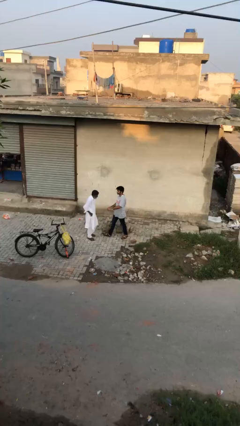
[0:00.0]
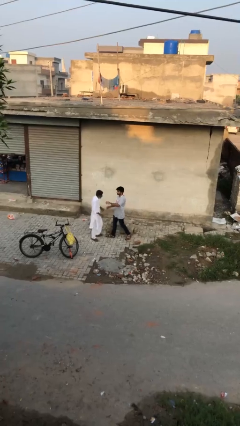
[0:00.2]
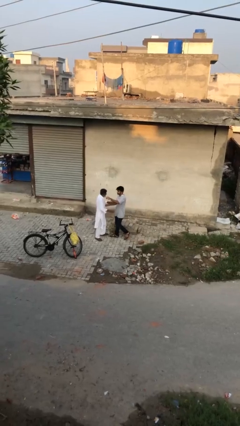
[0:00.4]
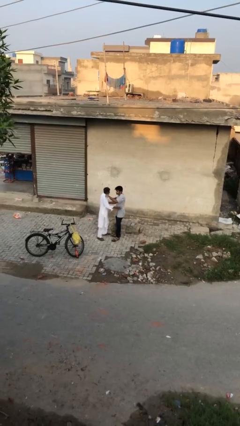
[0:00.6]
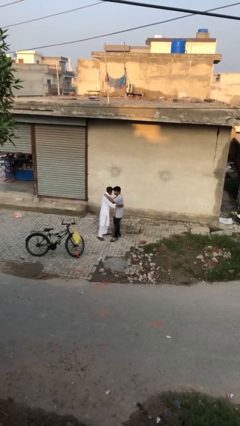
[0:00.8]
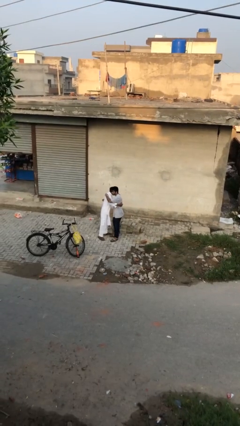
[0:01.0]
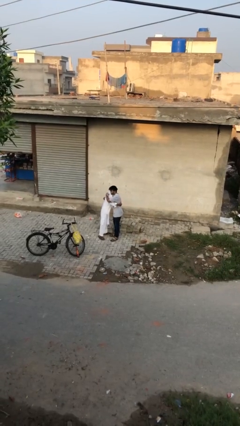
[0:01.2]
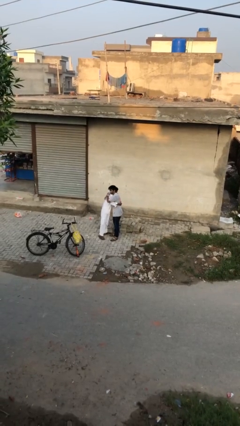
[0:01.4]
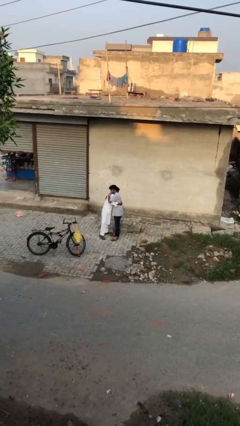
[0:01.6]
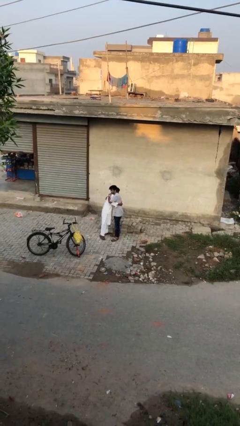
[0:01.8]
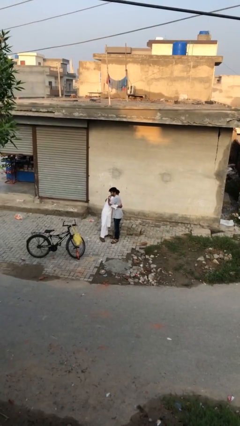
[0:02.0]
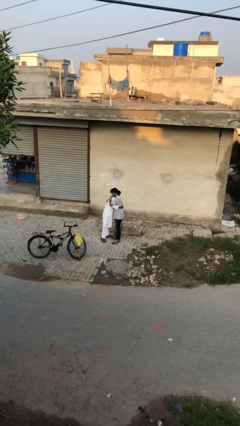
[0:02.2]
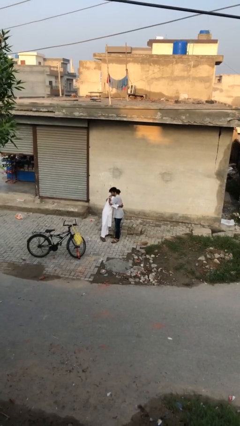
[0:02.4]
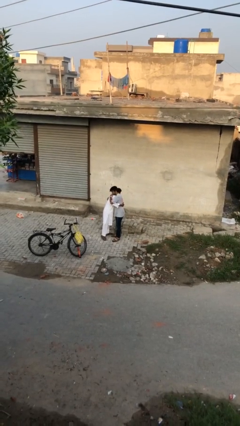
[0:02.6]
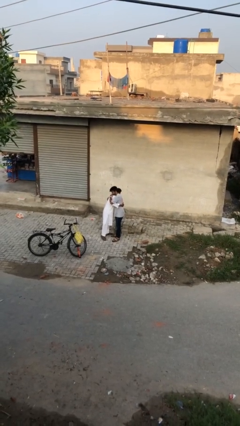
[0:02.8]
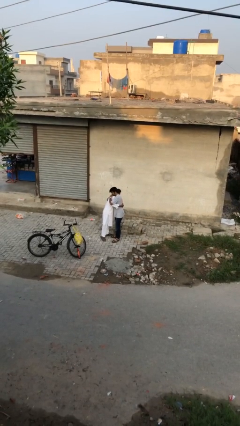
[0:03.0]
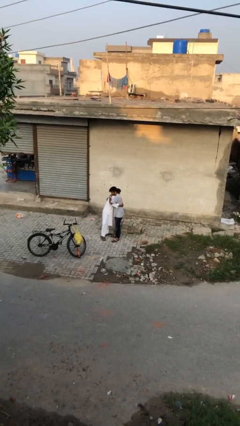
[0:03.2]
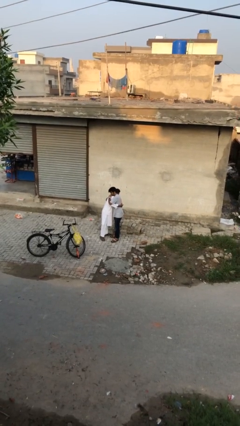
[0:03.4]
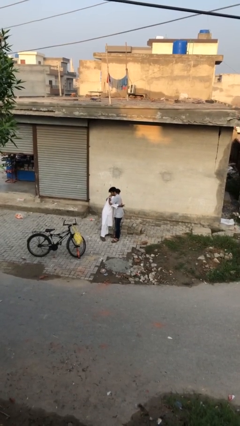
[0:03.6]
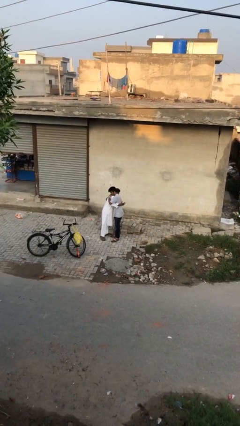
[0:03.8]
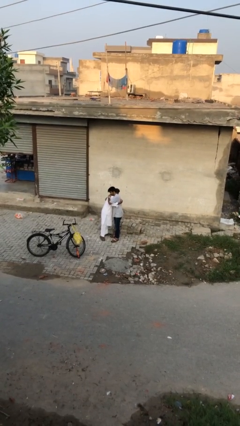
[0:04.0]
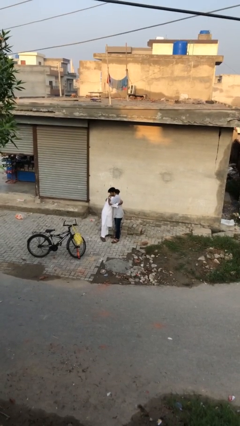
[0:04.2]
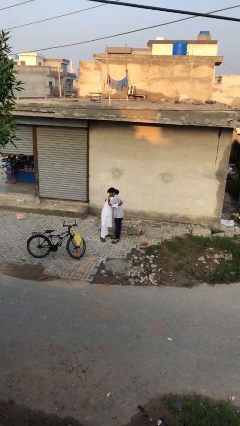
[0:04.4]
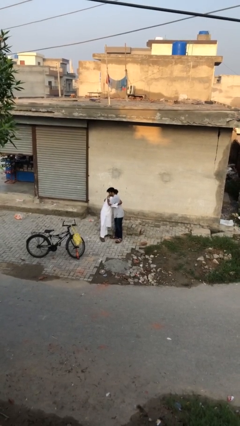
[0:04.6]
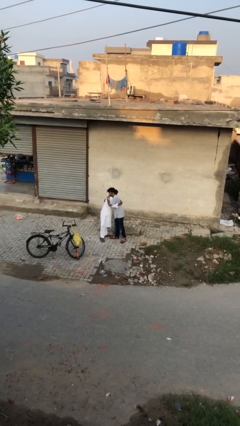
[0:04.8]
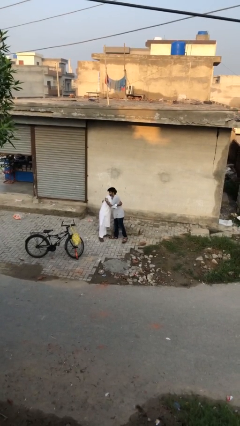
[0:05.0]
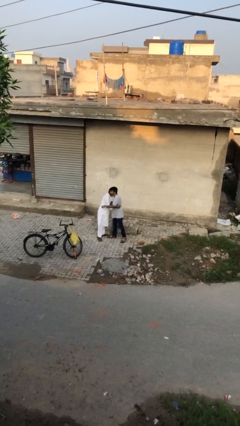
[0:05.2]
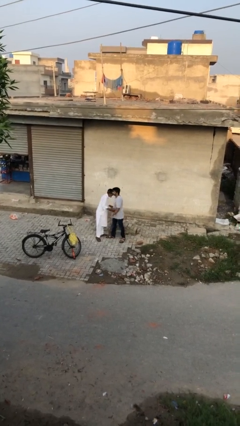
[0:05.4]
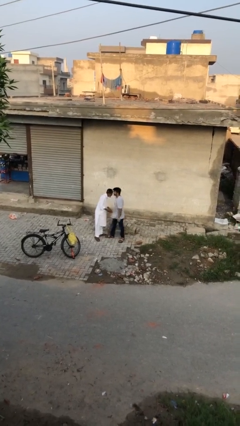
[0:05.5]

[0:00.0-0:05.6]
person embraces person

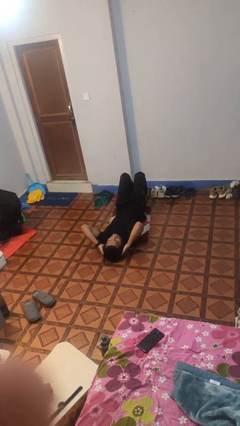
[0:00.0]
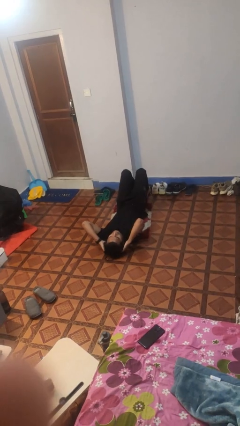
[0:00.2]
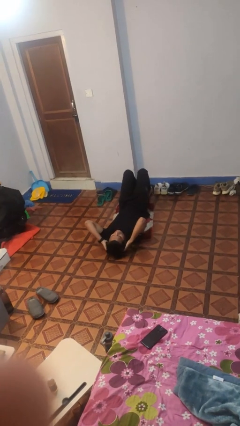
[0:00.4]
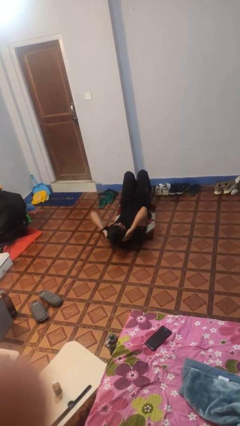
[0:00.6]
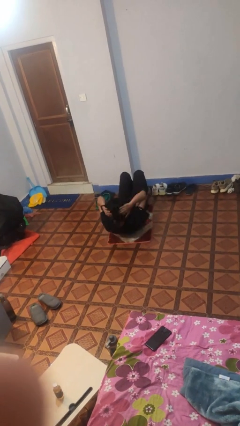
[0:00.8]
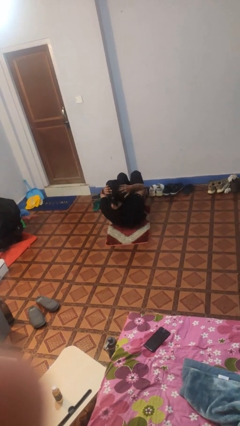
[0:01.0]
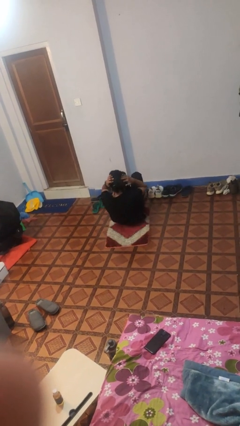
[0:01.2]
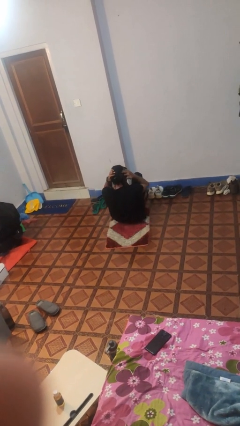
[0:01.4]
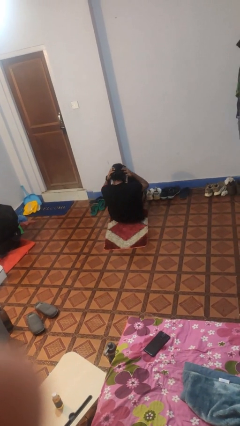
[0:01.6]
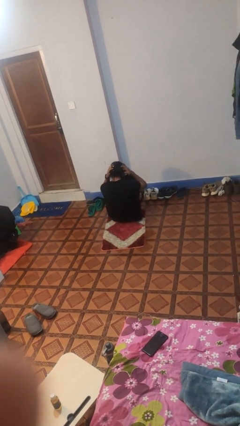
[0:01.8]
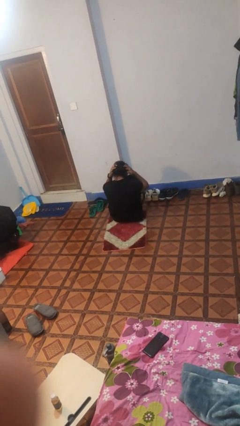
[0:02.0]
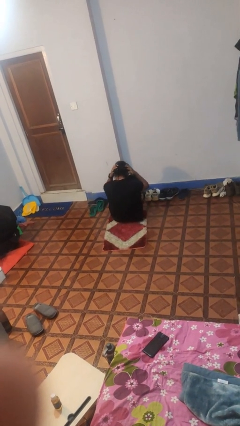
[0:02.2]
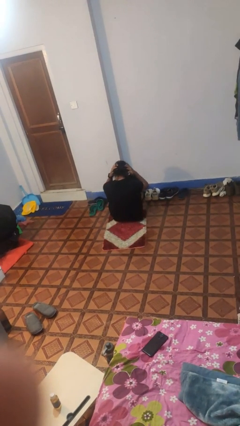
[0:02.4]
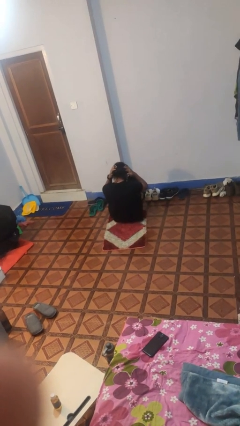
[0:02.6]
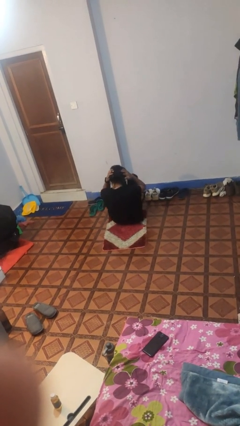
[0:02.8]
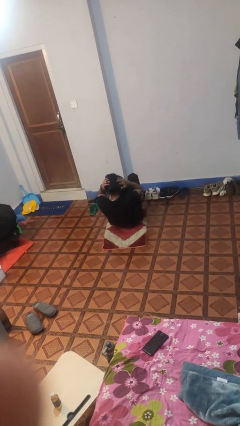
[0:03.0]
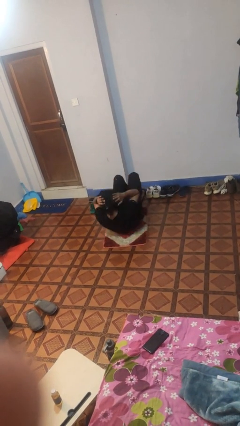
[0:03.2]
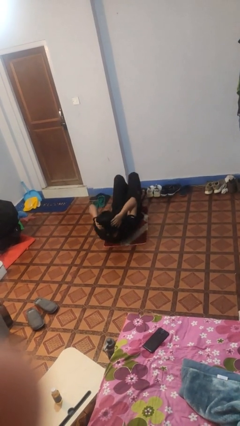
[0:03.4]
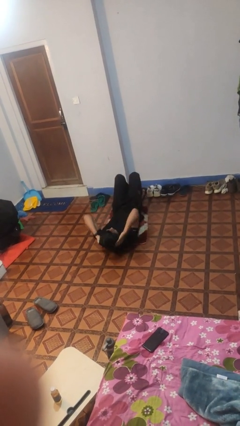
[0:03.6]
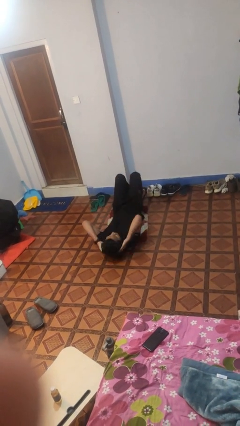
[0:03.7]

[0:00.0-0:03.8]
person exercises with situp

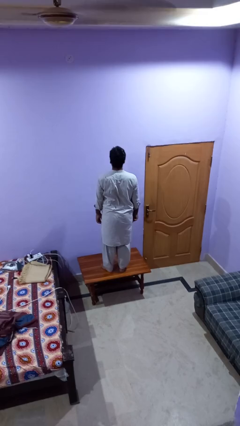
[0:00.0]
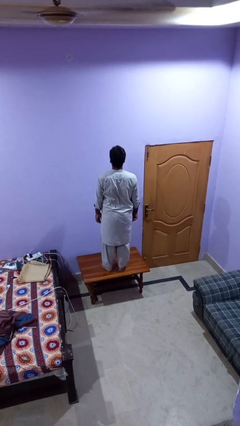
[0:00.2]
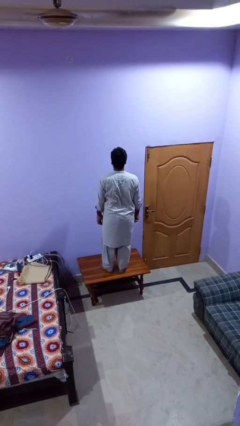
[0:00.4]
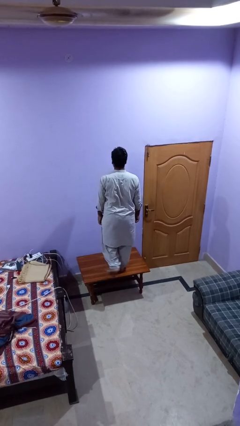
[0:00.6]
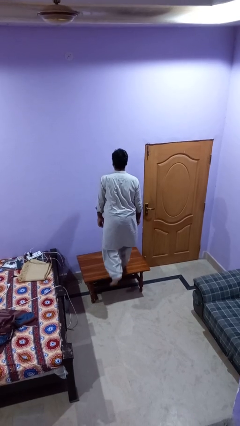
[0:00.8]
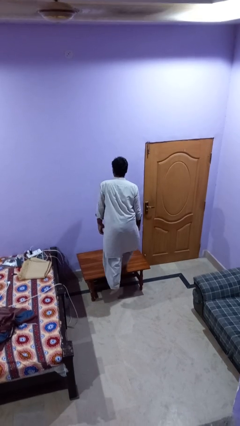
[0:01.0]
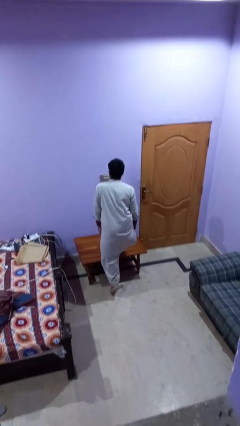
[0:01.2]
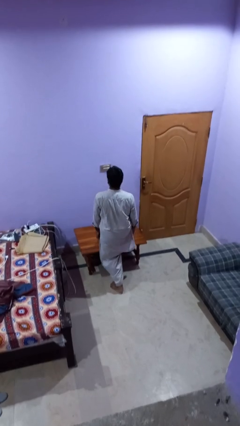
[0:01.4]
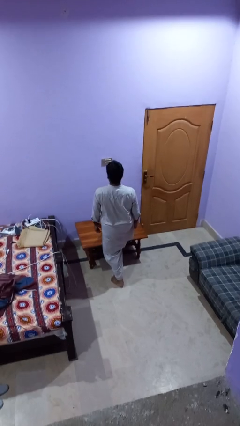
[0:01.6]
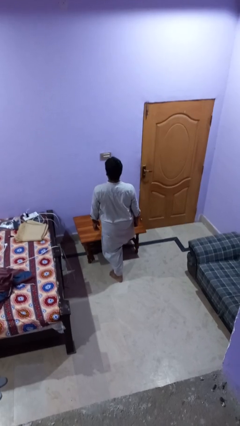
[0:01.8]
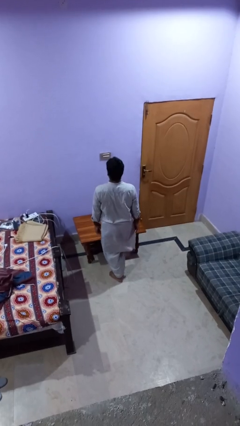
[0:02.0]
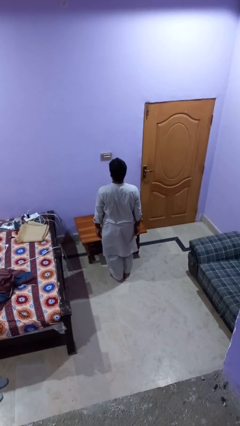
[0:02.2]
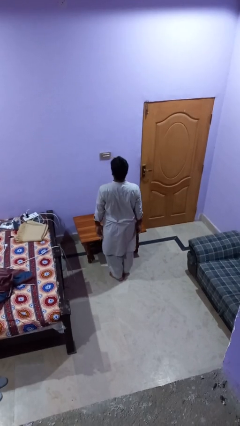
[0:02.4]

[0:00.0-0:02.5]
person climbs off table

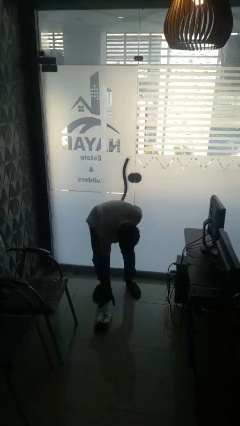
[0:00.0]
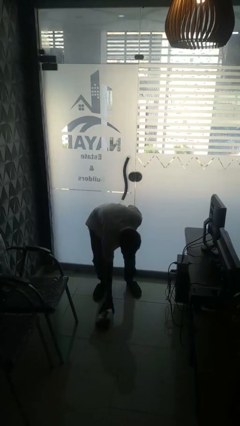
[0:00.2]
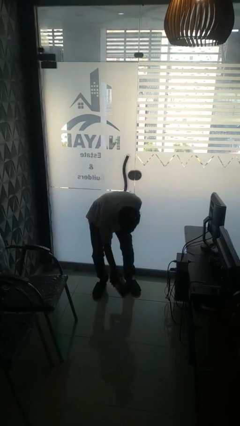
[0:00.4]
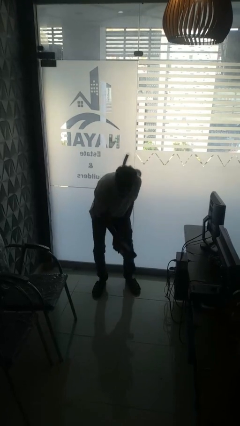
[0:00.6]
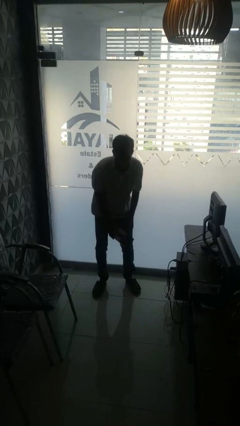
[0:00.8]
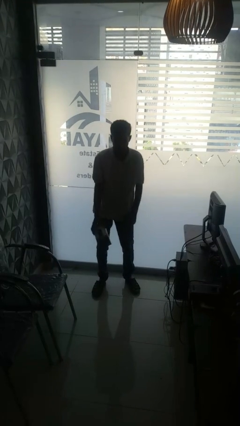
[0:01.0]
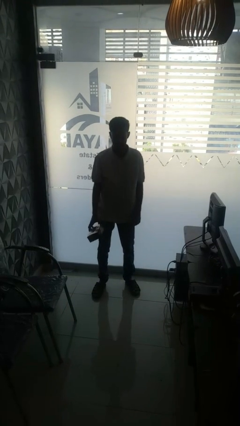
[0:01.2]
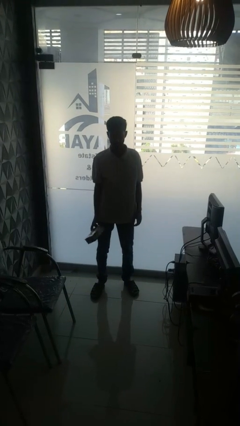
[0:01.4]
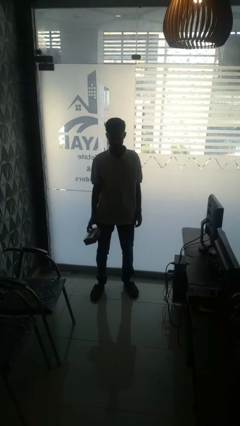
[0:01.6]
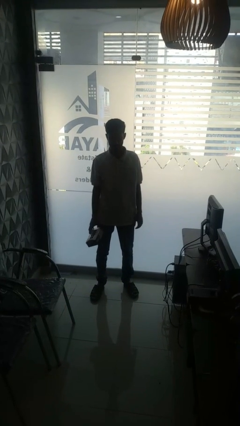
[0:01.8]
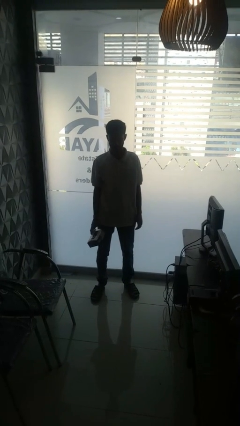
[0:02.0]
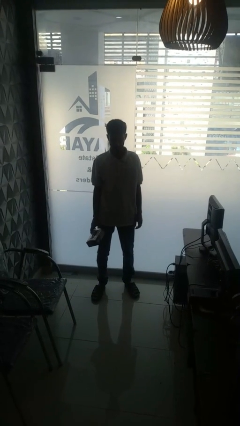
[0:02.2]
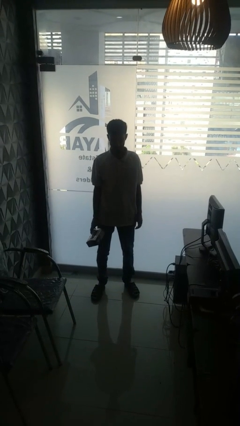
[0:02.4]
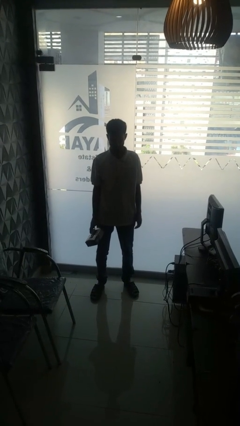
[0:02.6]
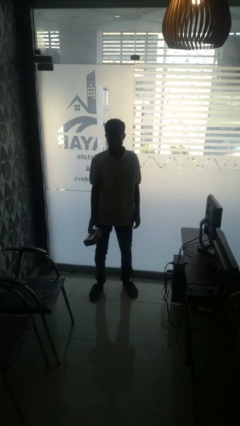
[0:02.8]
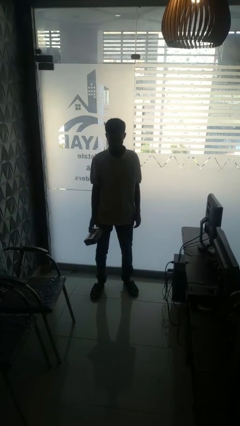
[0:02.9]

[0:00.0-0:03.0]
person picks up object from floor

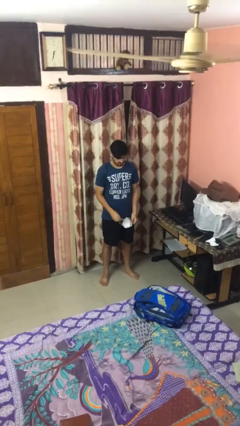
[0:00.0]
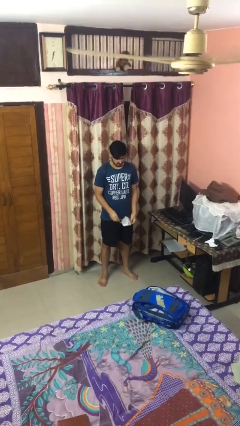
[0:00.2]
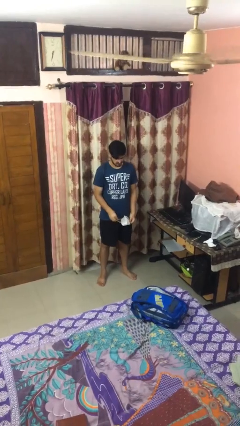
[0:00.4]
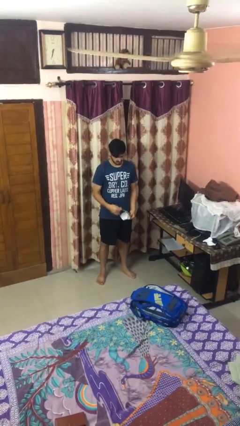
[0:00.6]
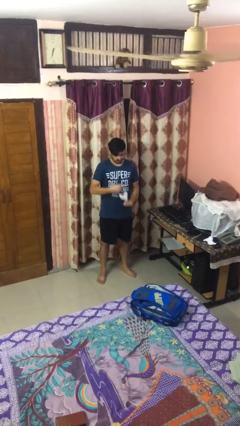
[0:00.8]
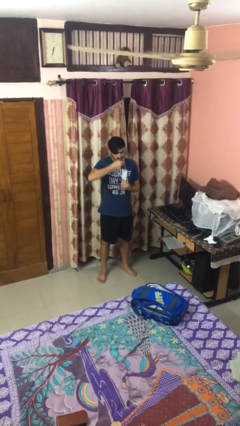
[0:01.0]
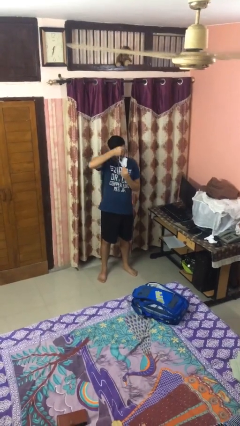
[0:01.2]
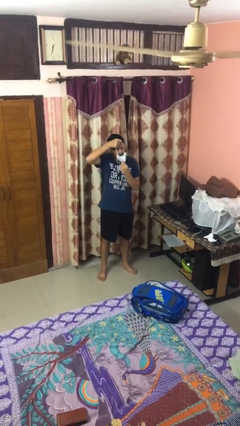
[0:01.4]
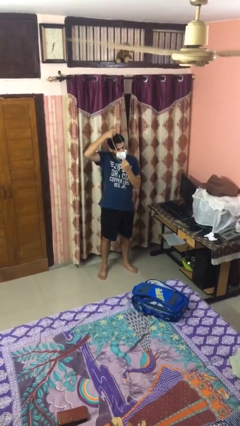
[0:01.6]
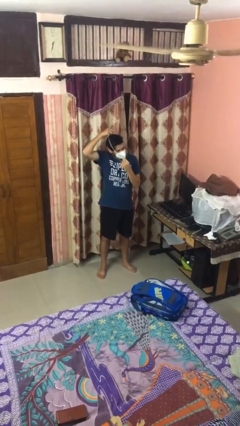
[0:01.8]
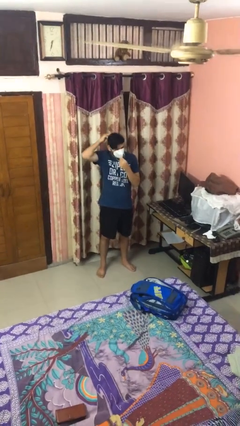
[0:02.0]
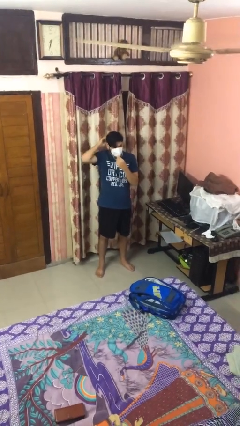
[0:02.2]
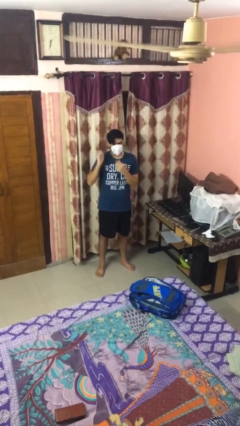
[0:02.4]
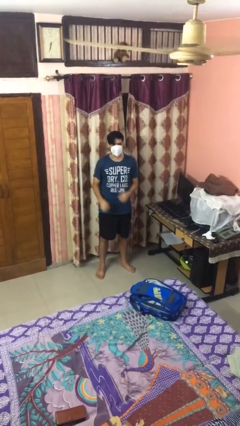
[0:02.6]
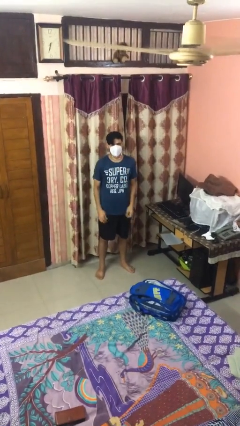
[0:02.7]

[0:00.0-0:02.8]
person puts on facemask
